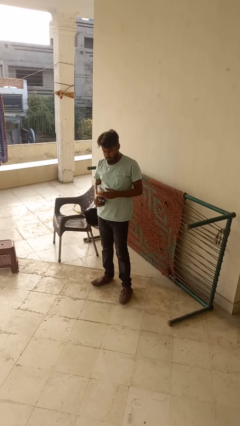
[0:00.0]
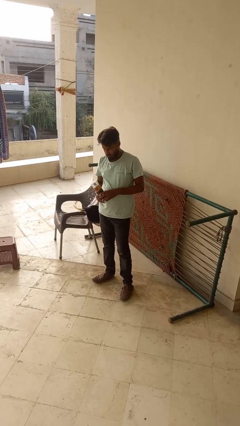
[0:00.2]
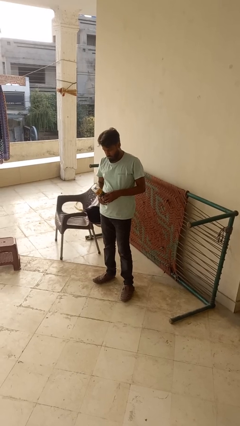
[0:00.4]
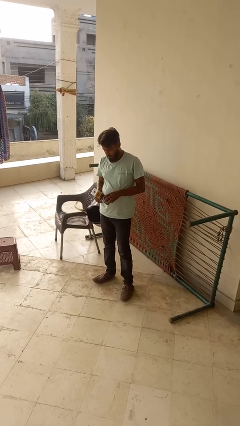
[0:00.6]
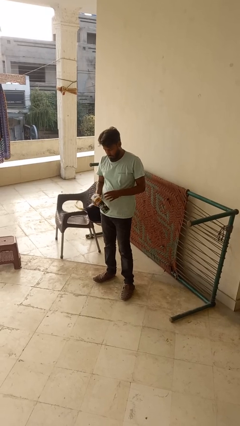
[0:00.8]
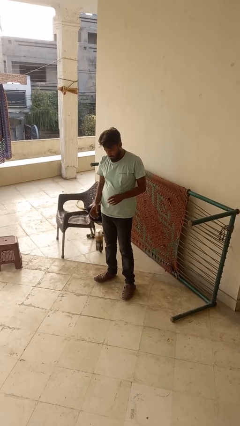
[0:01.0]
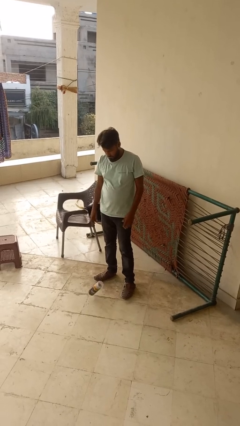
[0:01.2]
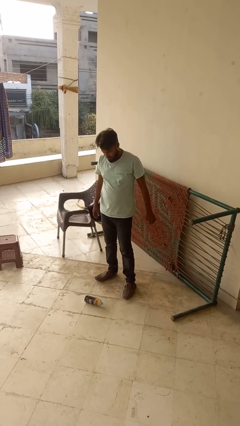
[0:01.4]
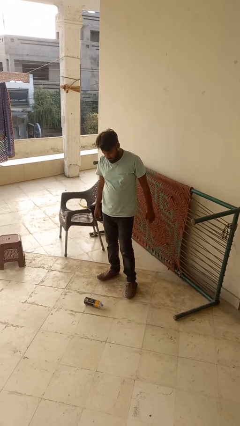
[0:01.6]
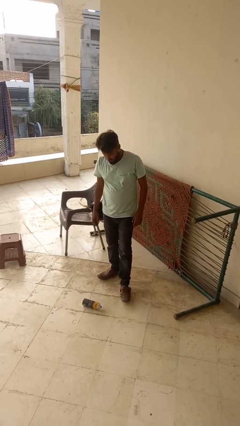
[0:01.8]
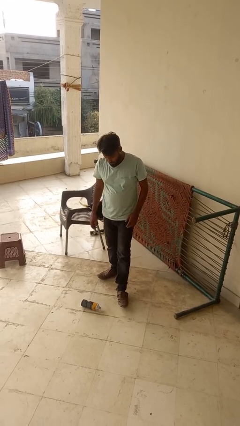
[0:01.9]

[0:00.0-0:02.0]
person drops object

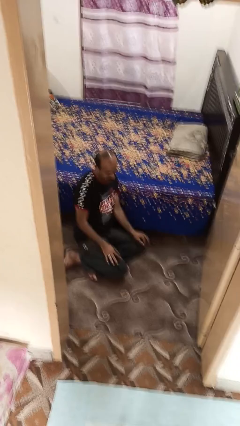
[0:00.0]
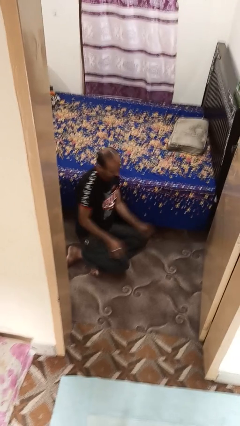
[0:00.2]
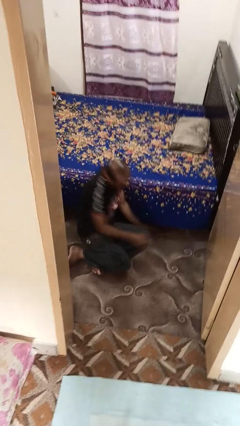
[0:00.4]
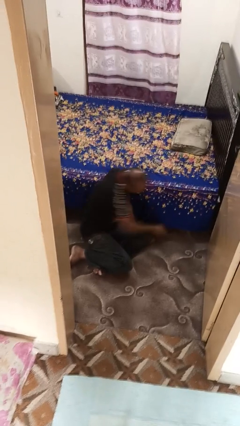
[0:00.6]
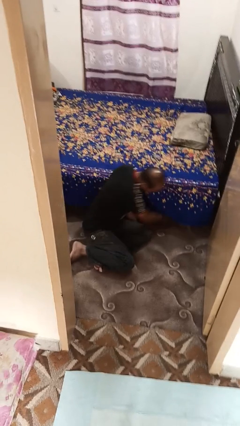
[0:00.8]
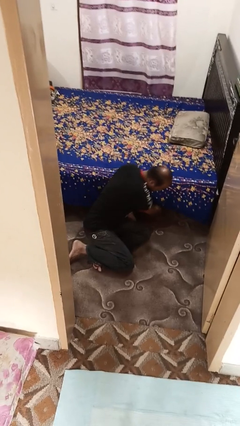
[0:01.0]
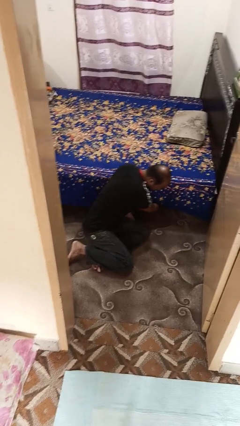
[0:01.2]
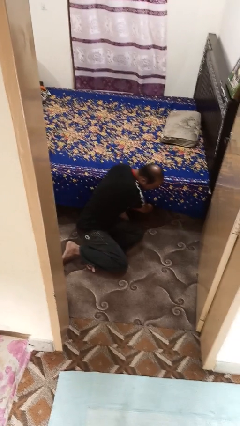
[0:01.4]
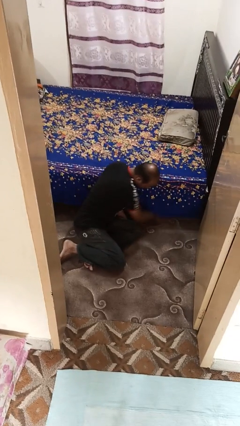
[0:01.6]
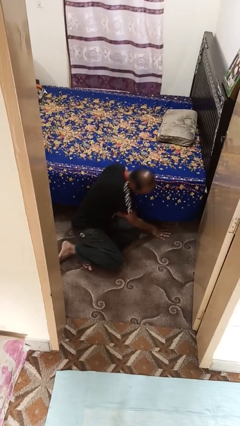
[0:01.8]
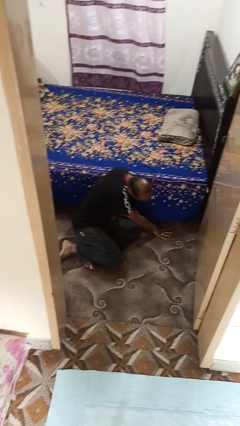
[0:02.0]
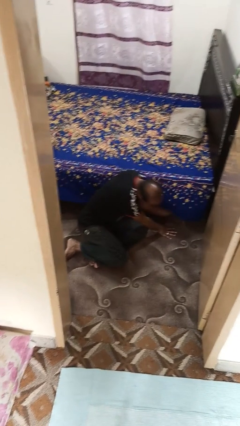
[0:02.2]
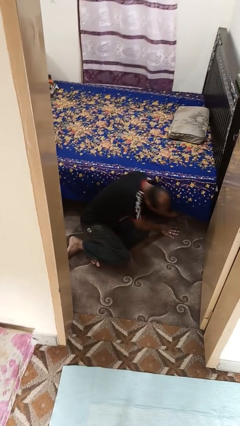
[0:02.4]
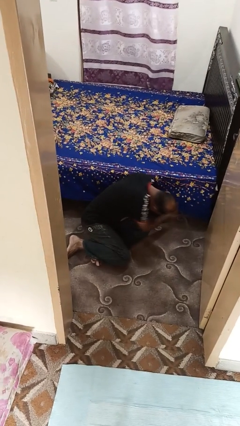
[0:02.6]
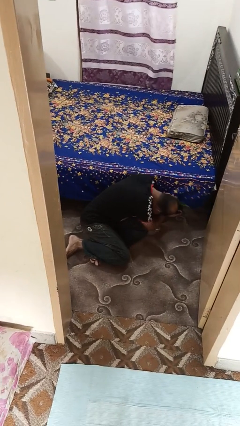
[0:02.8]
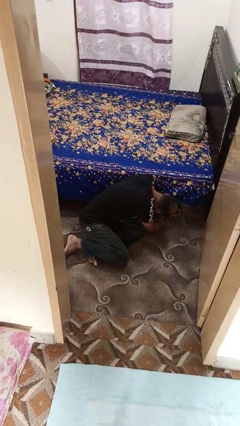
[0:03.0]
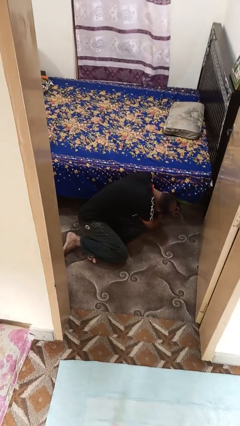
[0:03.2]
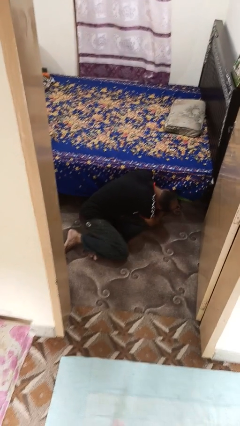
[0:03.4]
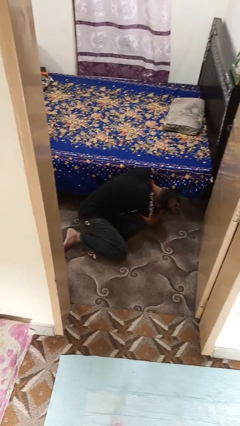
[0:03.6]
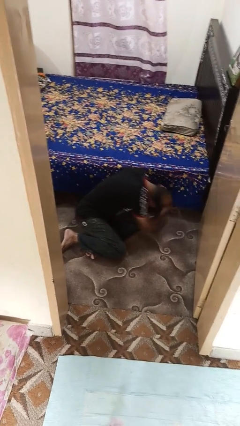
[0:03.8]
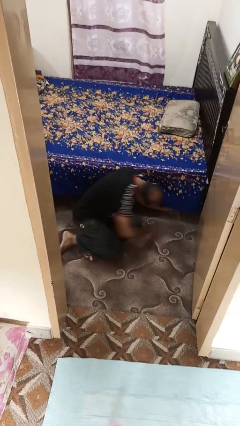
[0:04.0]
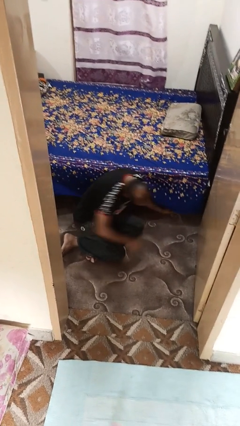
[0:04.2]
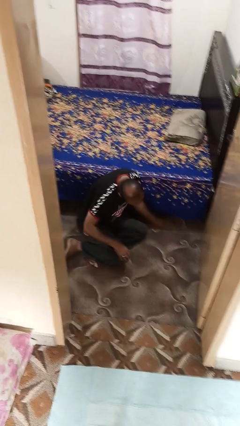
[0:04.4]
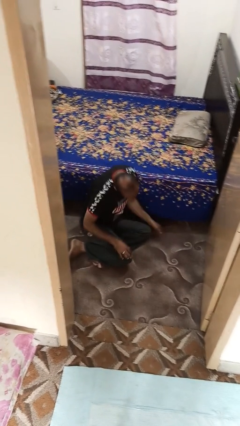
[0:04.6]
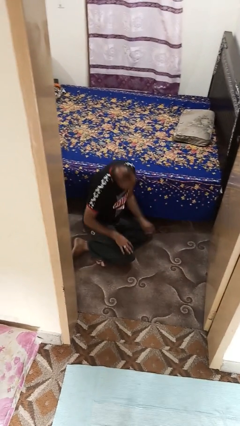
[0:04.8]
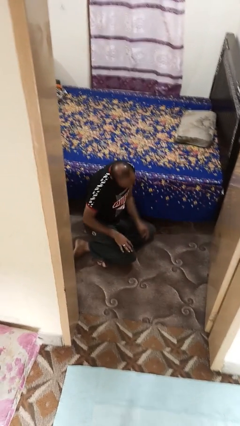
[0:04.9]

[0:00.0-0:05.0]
person searches under bed

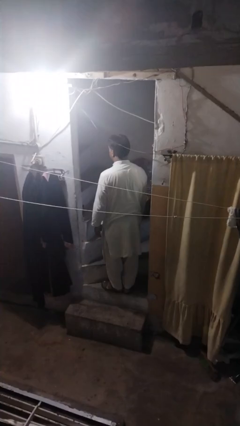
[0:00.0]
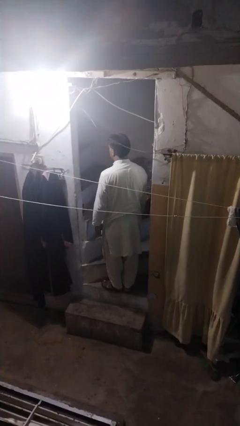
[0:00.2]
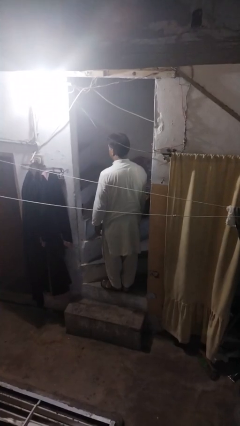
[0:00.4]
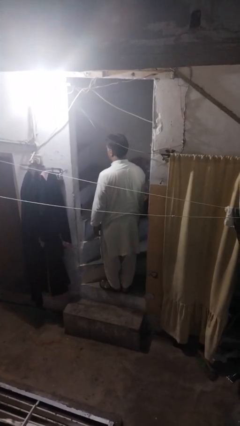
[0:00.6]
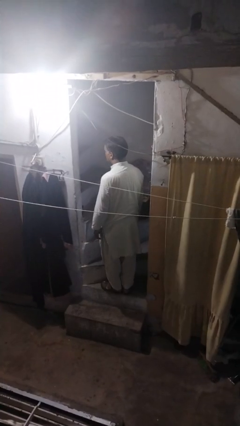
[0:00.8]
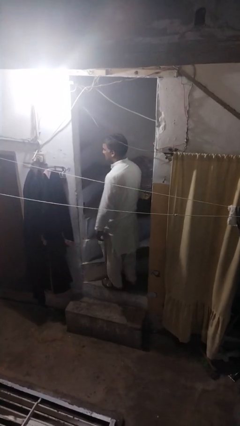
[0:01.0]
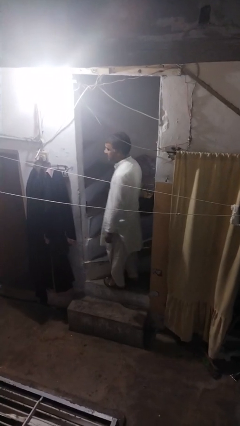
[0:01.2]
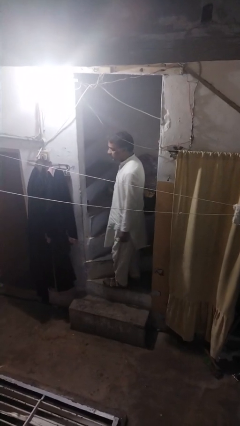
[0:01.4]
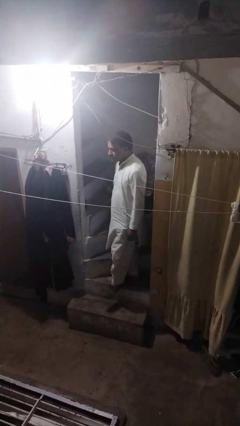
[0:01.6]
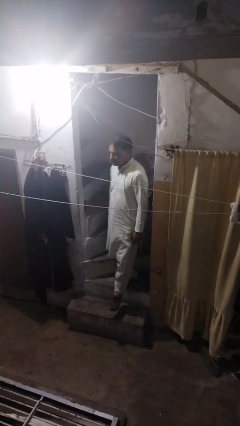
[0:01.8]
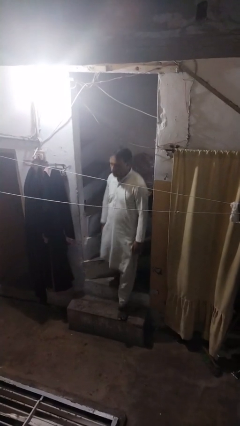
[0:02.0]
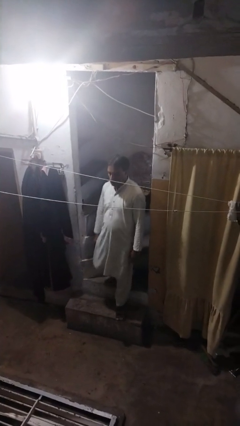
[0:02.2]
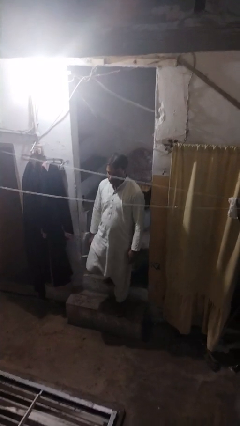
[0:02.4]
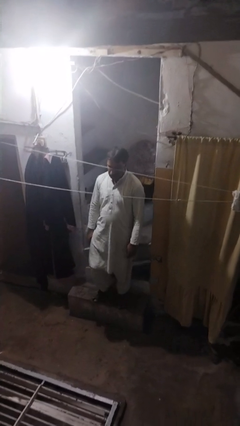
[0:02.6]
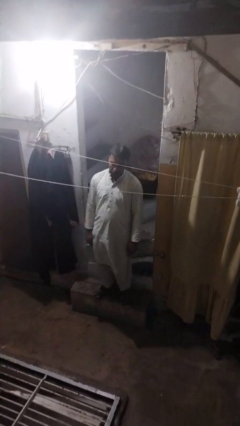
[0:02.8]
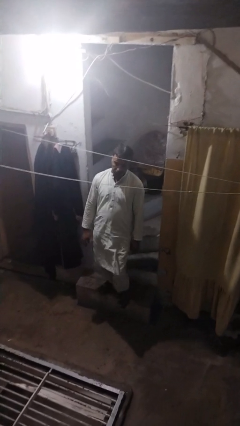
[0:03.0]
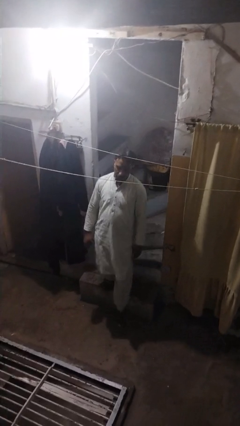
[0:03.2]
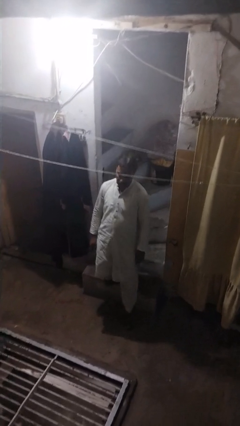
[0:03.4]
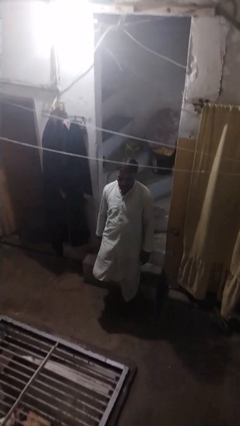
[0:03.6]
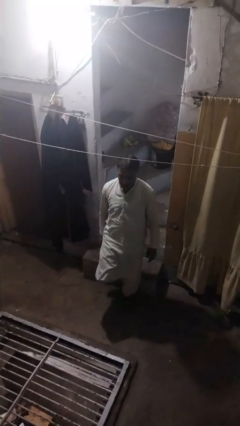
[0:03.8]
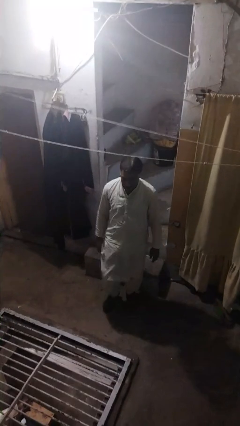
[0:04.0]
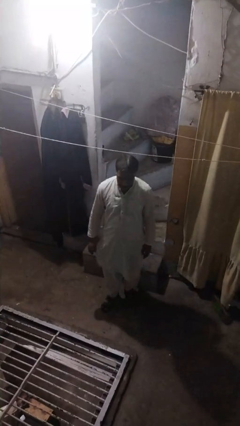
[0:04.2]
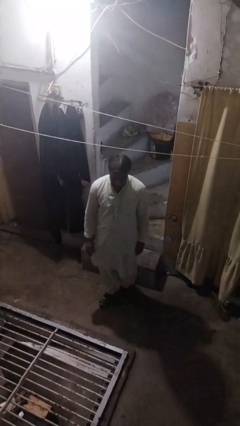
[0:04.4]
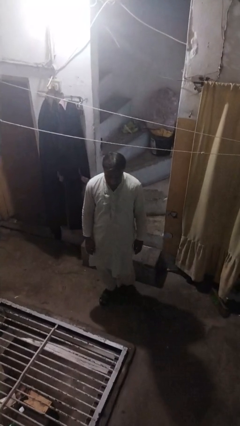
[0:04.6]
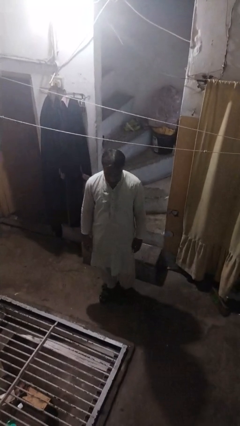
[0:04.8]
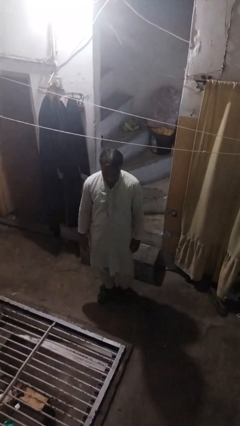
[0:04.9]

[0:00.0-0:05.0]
person climbs down stairs

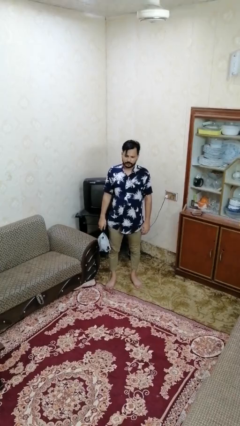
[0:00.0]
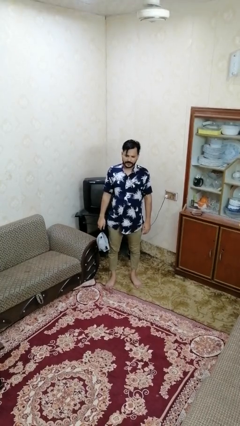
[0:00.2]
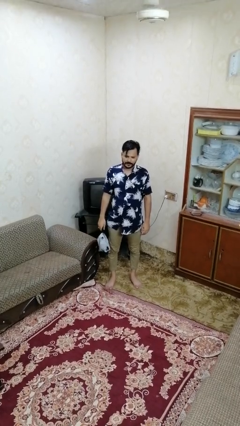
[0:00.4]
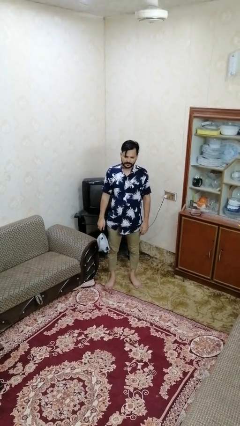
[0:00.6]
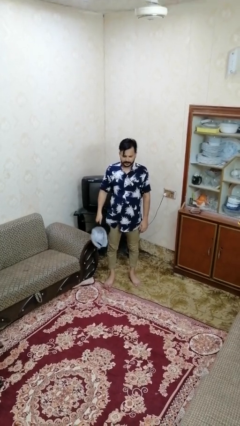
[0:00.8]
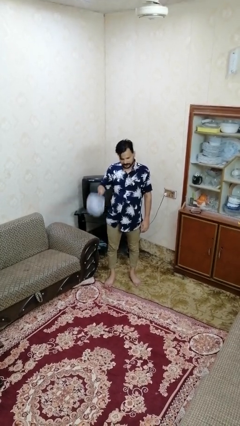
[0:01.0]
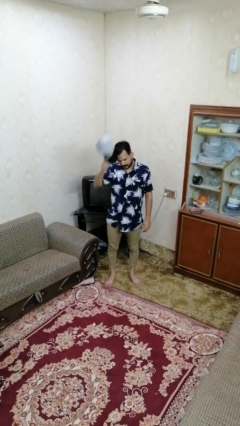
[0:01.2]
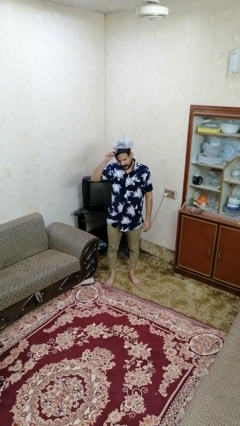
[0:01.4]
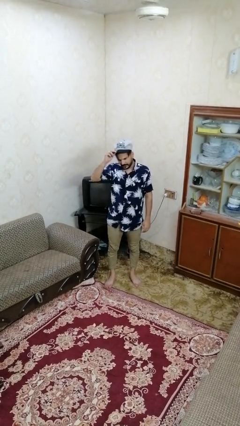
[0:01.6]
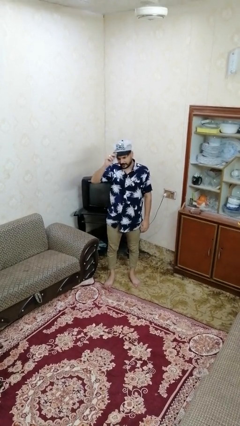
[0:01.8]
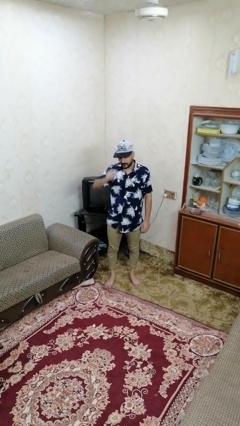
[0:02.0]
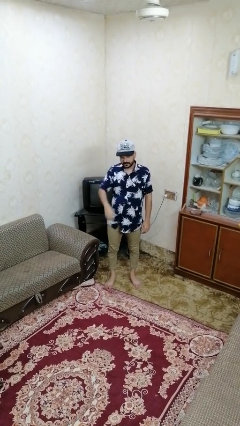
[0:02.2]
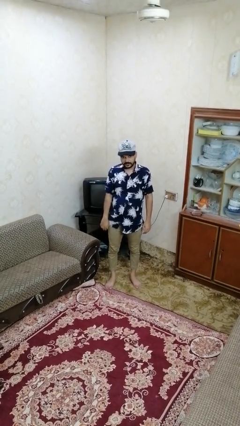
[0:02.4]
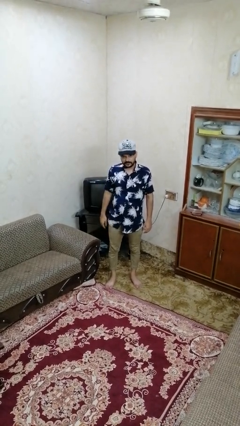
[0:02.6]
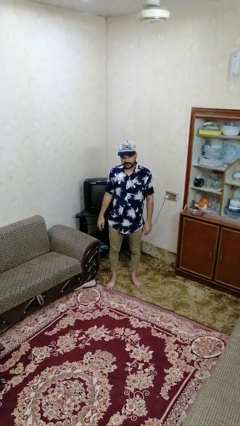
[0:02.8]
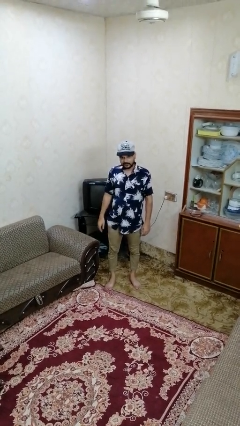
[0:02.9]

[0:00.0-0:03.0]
person puts on hat

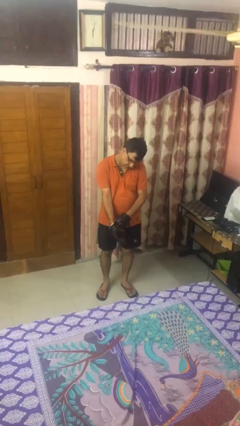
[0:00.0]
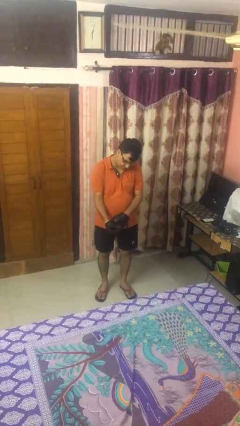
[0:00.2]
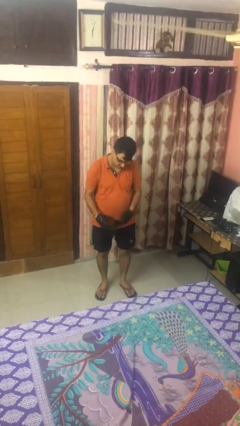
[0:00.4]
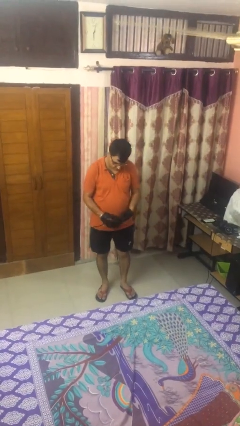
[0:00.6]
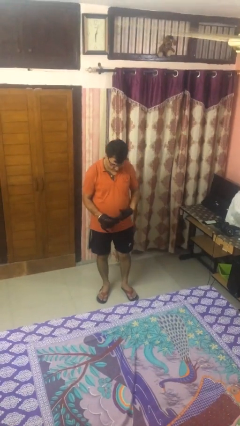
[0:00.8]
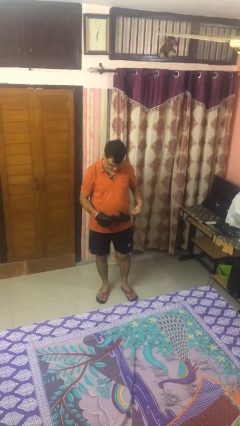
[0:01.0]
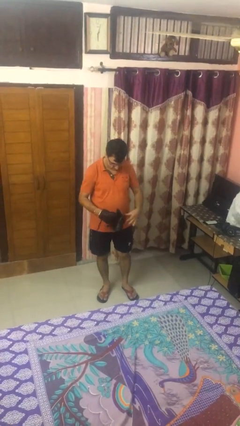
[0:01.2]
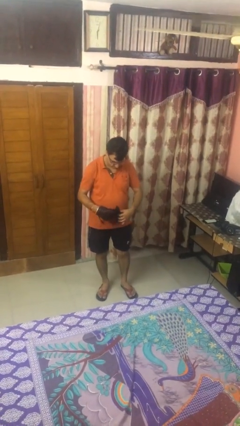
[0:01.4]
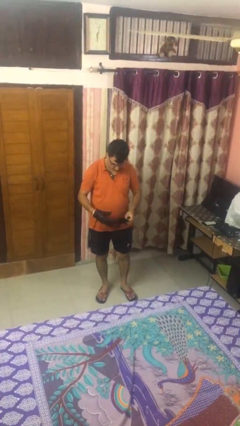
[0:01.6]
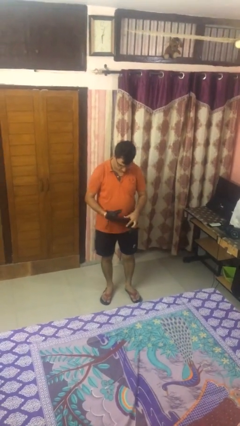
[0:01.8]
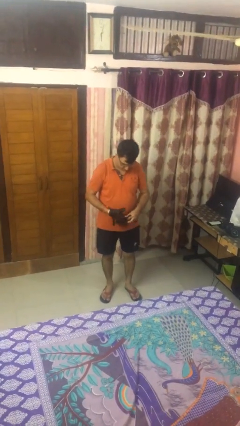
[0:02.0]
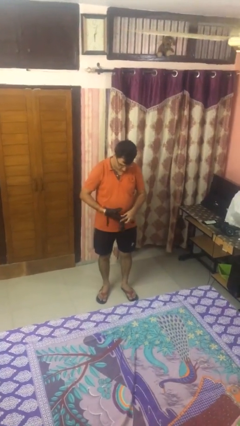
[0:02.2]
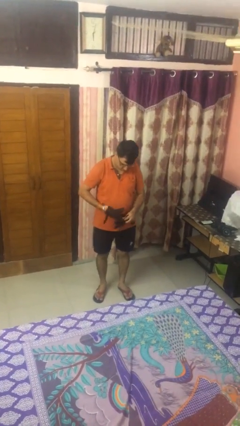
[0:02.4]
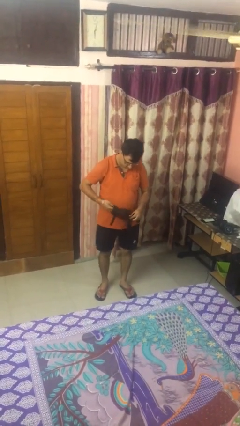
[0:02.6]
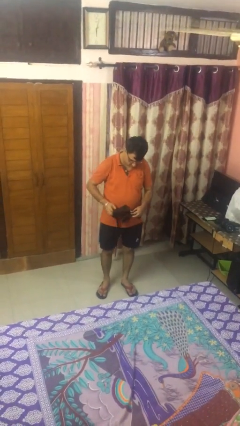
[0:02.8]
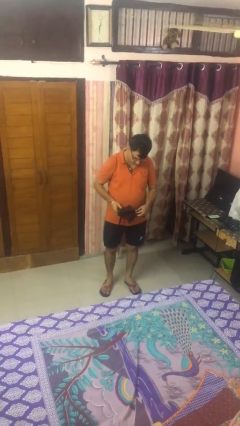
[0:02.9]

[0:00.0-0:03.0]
person takes off gloves
